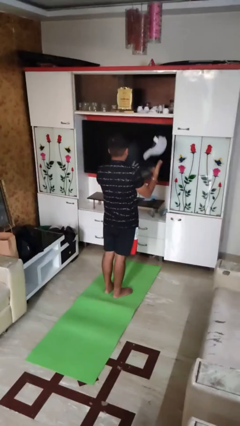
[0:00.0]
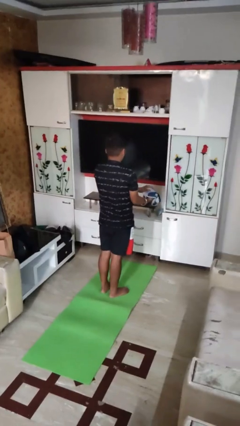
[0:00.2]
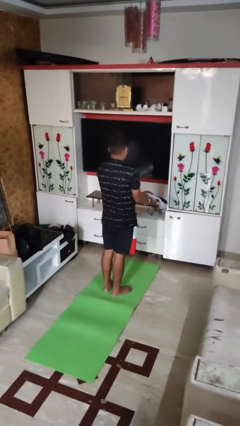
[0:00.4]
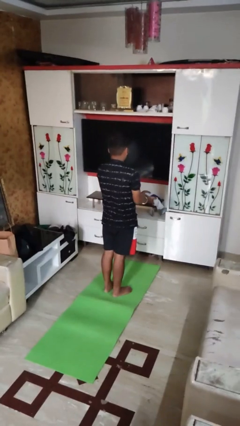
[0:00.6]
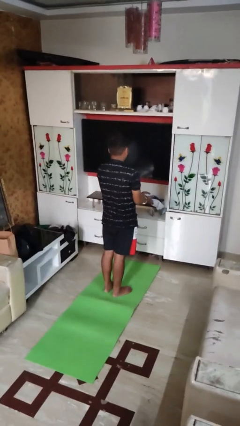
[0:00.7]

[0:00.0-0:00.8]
person catches dropped object

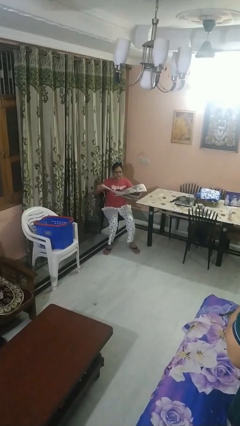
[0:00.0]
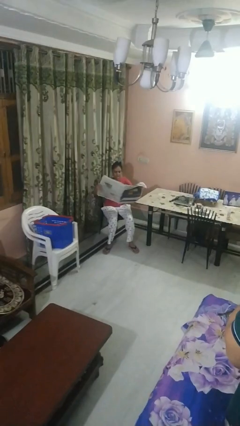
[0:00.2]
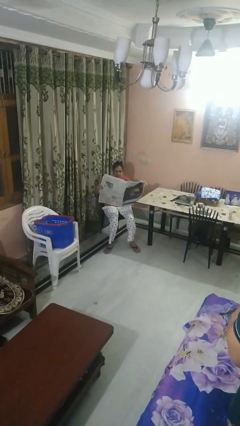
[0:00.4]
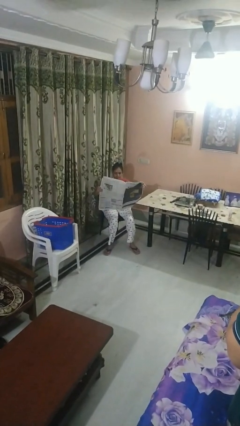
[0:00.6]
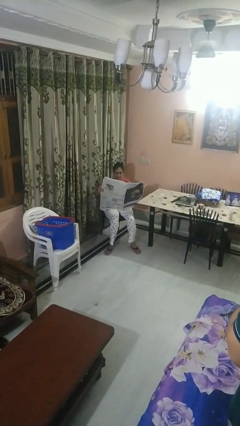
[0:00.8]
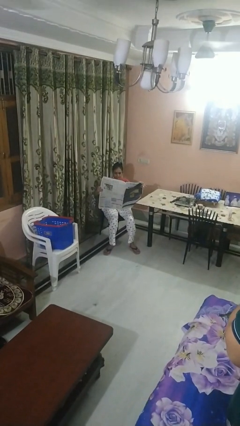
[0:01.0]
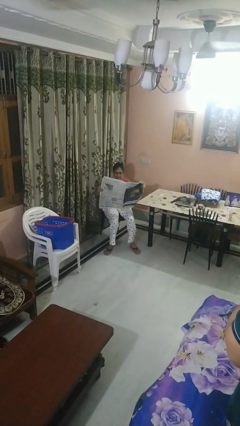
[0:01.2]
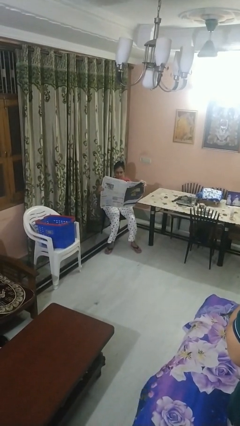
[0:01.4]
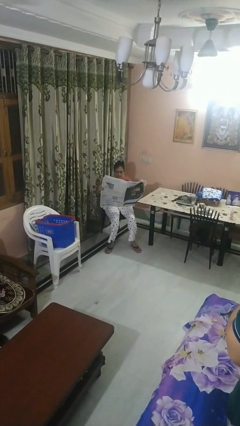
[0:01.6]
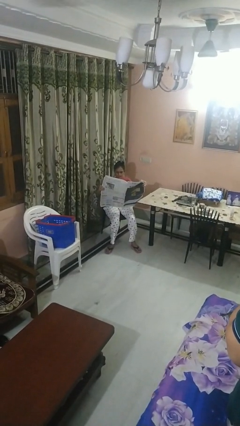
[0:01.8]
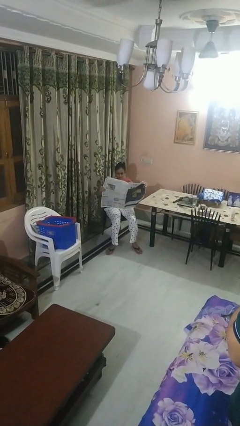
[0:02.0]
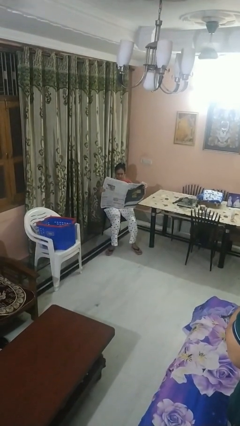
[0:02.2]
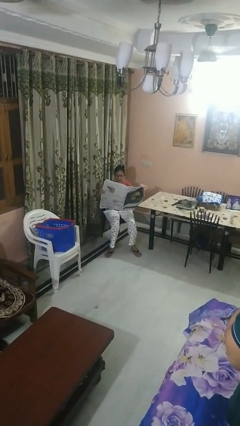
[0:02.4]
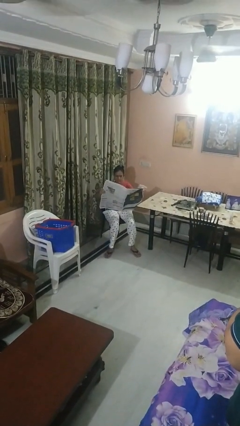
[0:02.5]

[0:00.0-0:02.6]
person reads newspaper

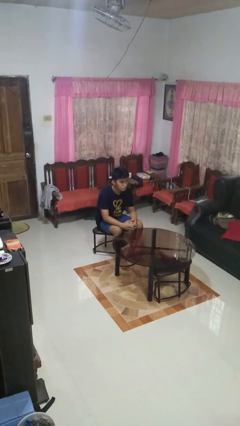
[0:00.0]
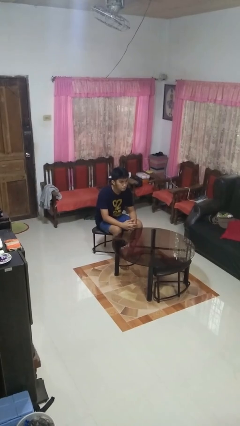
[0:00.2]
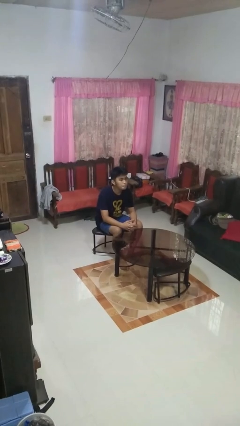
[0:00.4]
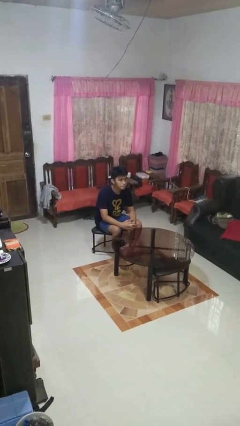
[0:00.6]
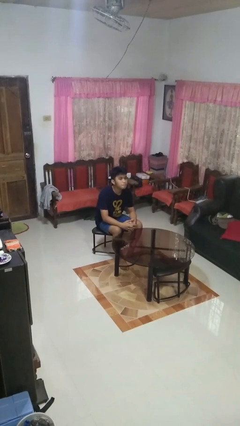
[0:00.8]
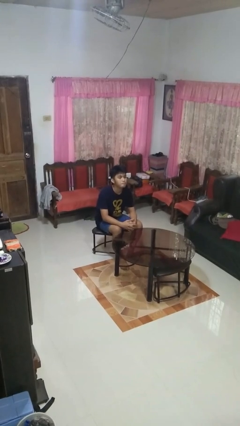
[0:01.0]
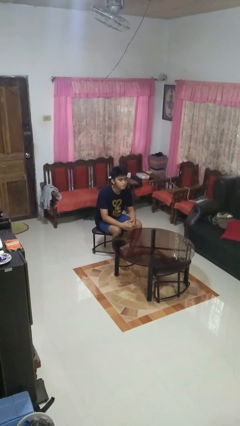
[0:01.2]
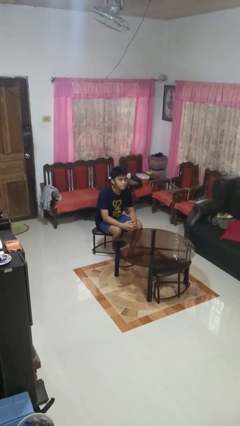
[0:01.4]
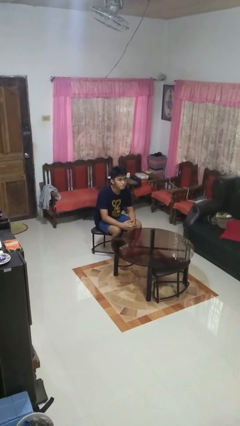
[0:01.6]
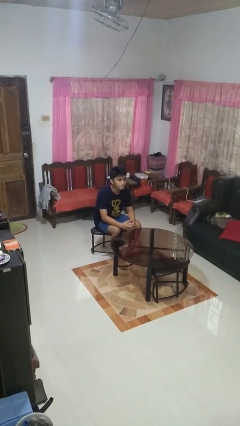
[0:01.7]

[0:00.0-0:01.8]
person nods head

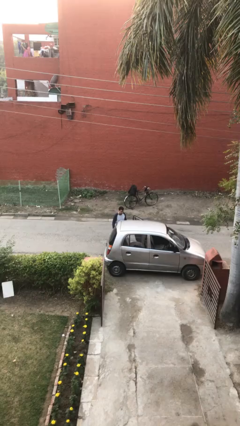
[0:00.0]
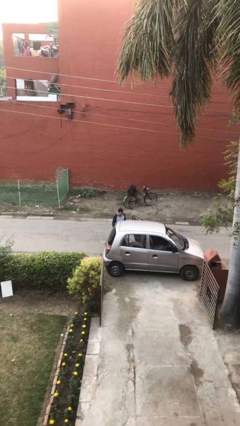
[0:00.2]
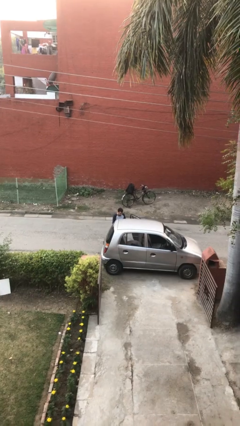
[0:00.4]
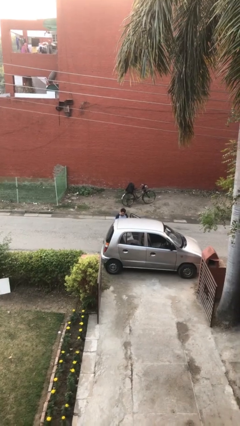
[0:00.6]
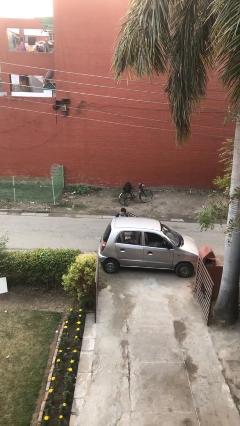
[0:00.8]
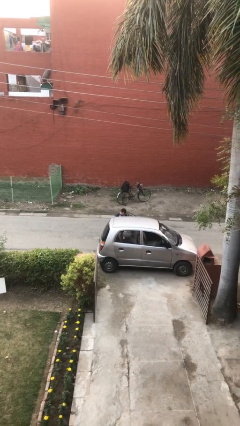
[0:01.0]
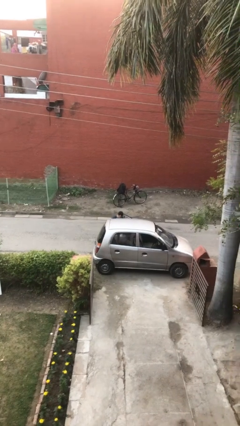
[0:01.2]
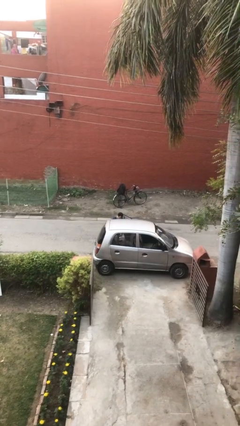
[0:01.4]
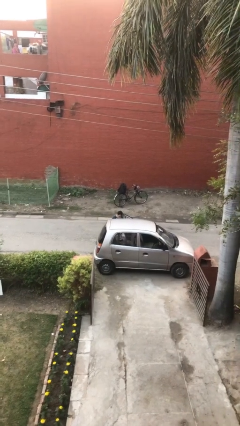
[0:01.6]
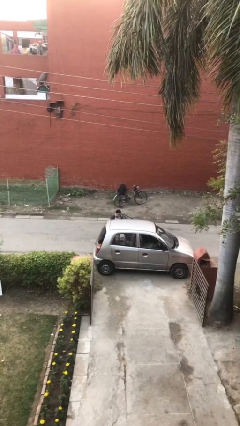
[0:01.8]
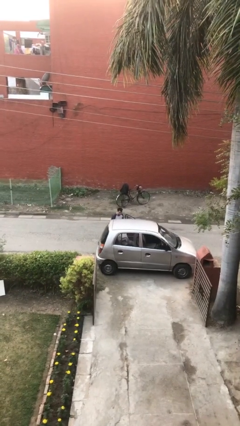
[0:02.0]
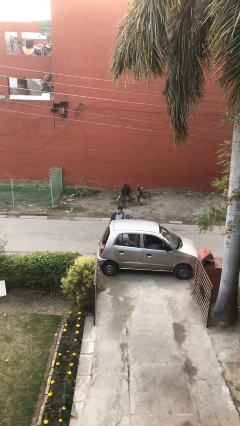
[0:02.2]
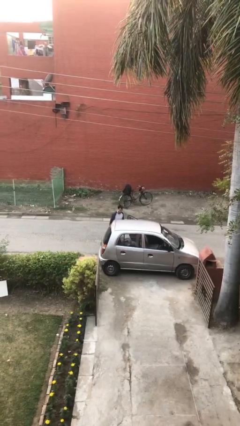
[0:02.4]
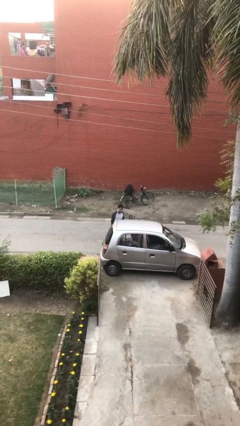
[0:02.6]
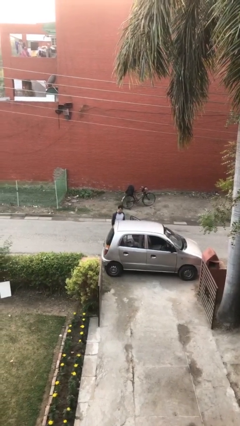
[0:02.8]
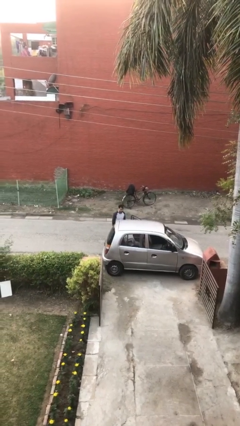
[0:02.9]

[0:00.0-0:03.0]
person loads car

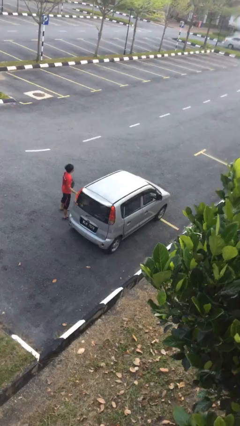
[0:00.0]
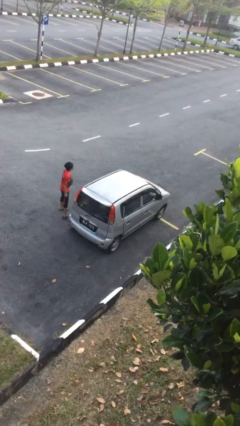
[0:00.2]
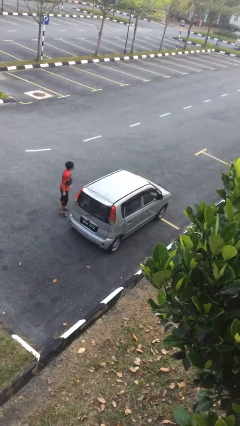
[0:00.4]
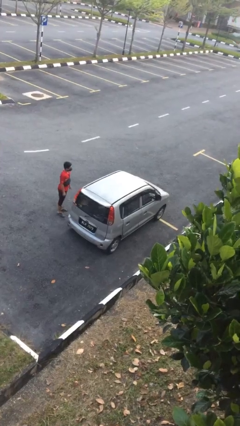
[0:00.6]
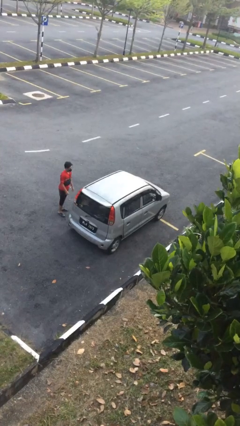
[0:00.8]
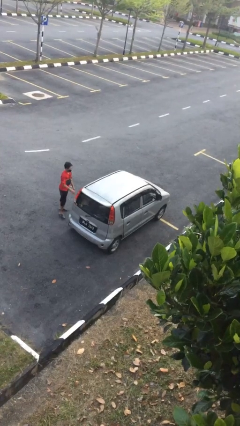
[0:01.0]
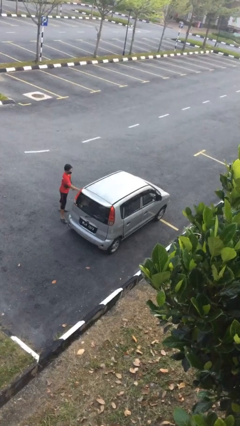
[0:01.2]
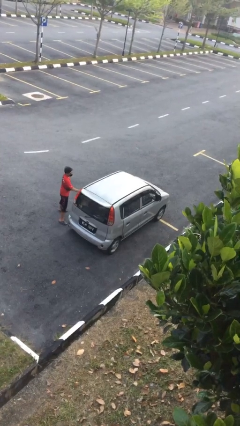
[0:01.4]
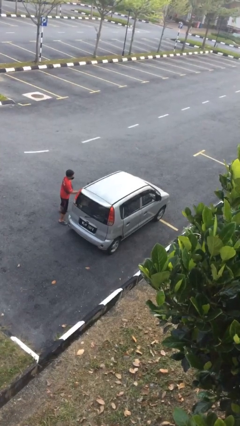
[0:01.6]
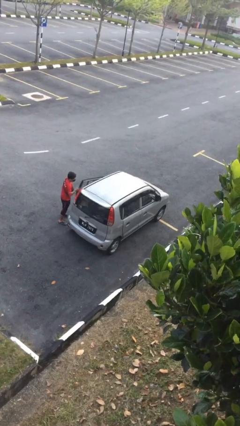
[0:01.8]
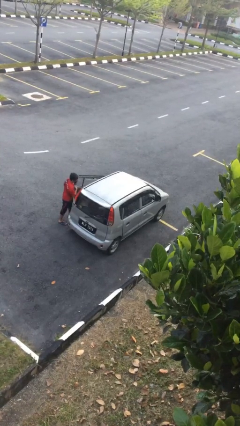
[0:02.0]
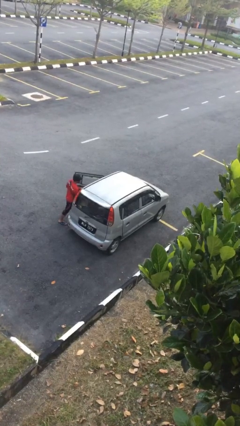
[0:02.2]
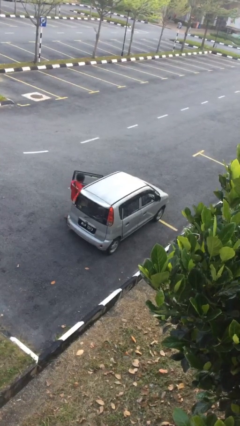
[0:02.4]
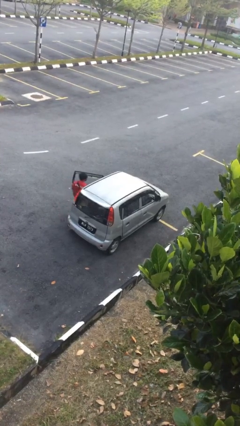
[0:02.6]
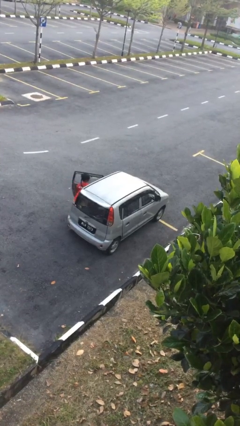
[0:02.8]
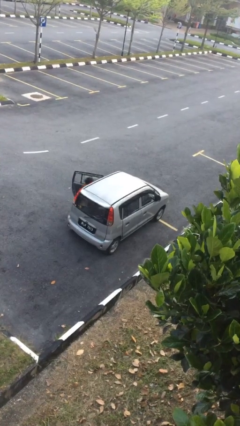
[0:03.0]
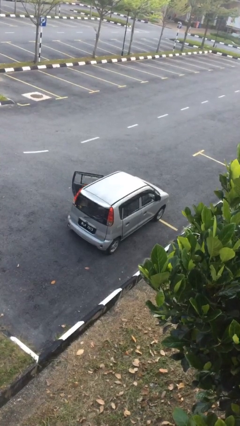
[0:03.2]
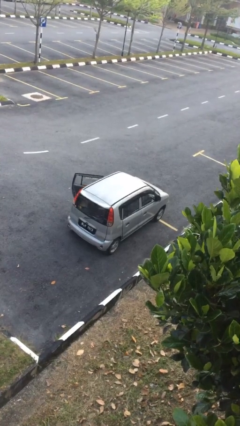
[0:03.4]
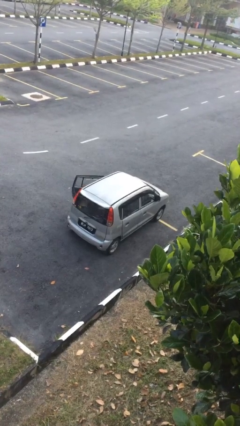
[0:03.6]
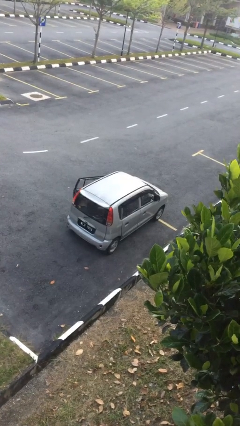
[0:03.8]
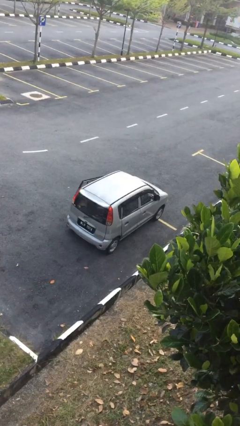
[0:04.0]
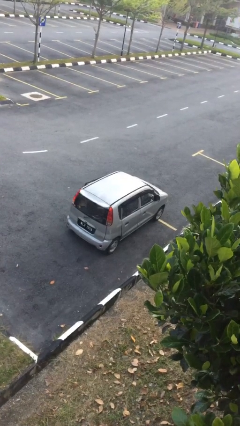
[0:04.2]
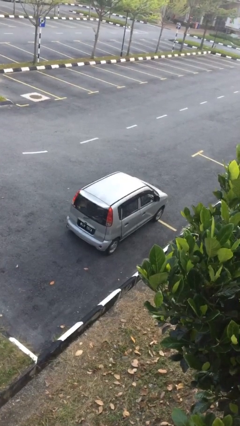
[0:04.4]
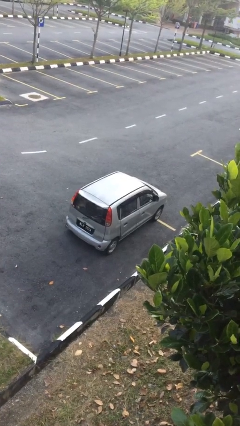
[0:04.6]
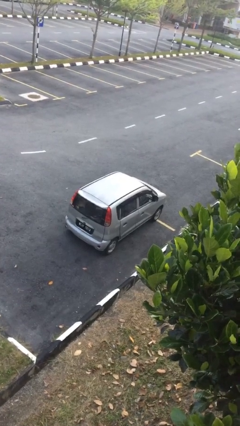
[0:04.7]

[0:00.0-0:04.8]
car picks up person

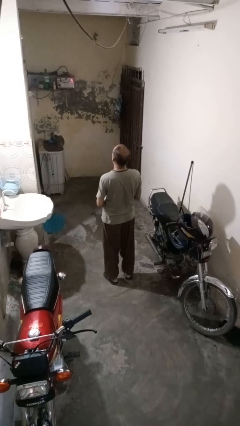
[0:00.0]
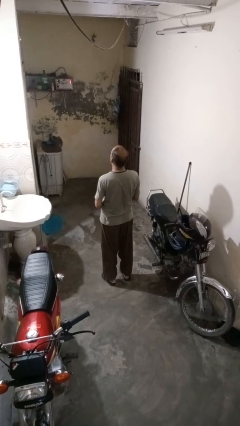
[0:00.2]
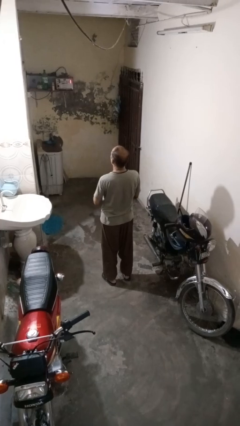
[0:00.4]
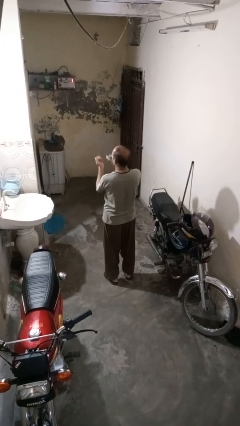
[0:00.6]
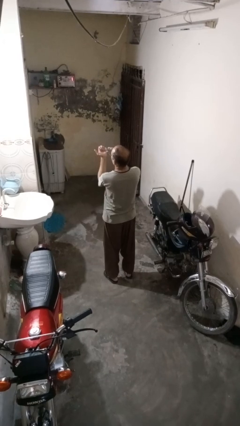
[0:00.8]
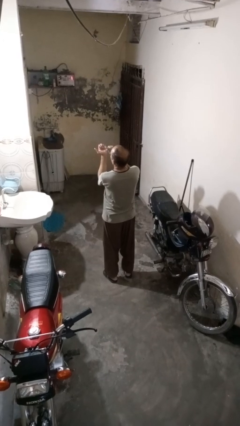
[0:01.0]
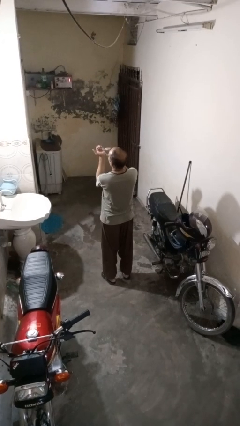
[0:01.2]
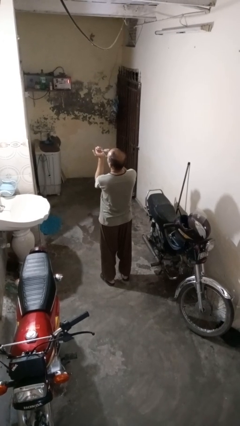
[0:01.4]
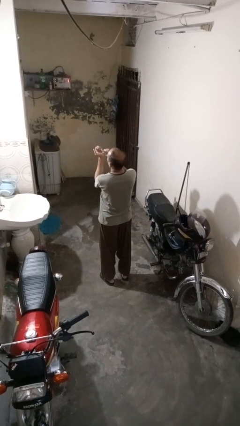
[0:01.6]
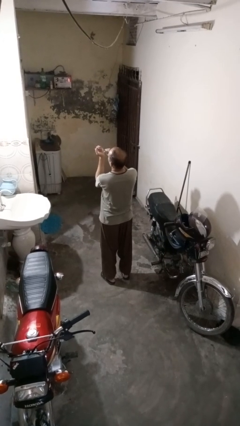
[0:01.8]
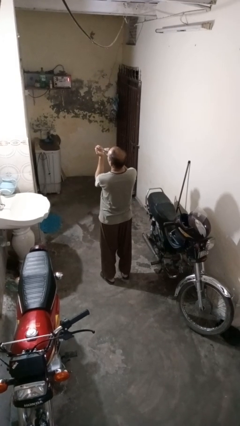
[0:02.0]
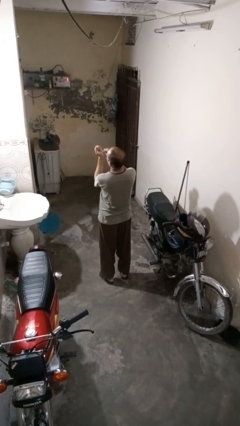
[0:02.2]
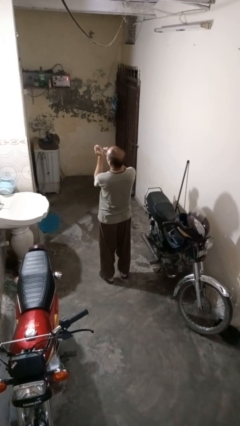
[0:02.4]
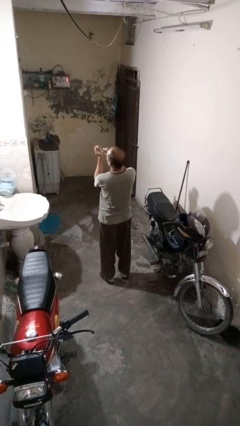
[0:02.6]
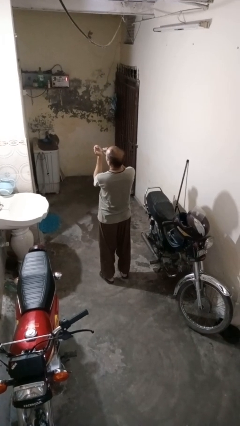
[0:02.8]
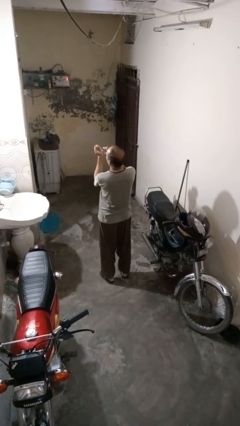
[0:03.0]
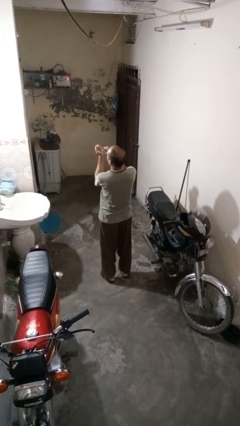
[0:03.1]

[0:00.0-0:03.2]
person clips fingernails

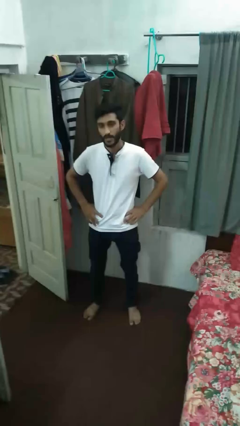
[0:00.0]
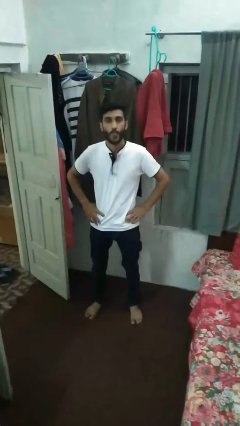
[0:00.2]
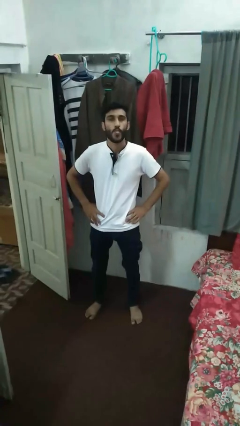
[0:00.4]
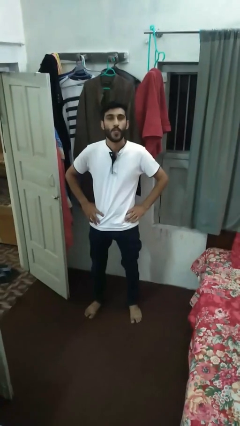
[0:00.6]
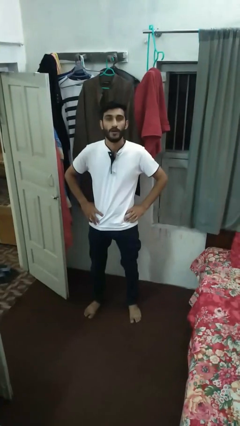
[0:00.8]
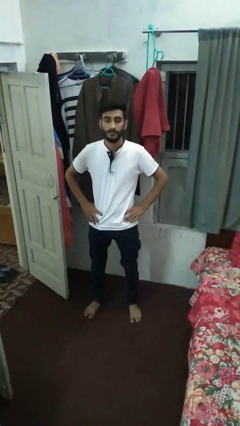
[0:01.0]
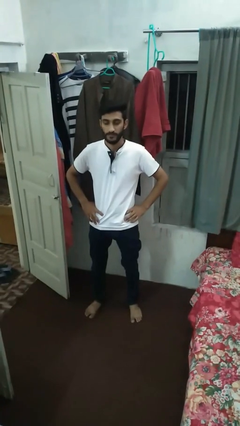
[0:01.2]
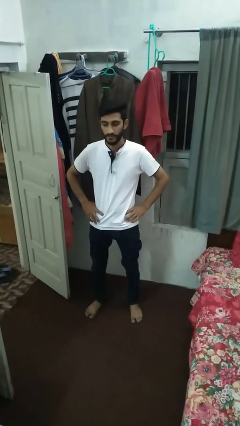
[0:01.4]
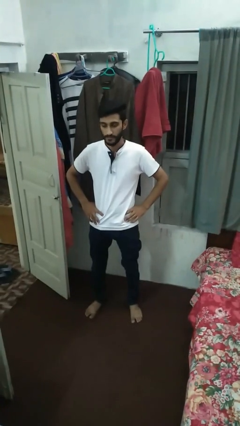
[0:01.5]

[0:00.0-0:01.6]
person sticks out tongue
